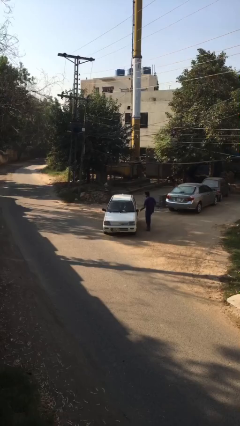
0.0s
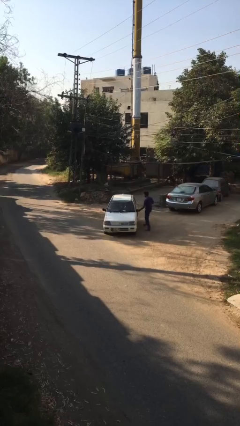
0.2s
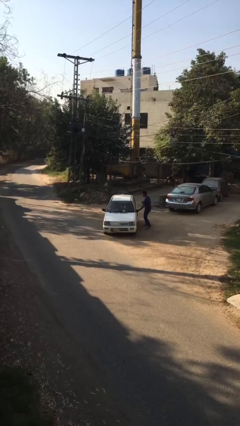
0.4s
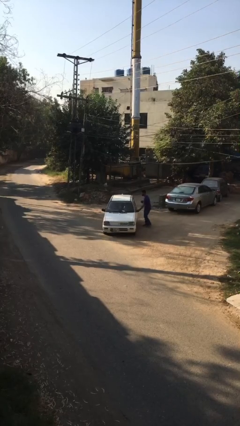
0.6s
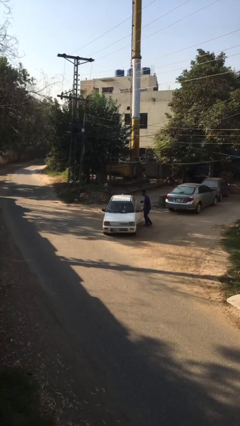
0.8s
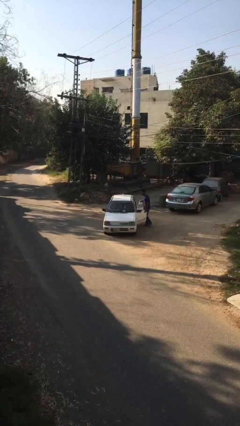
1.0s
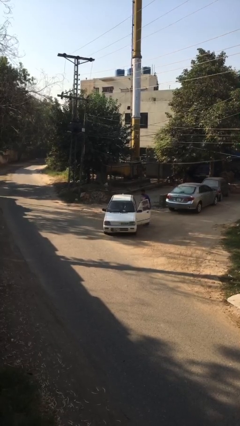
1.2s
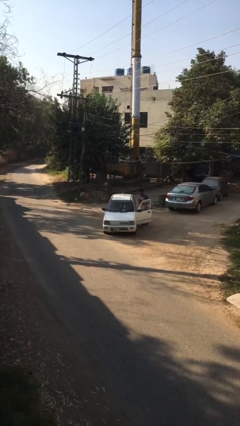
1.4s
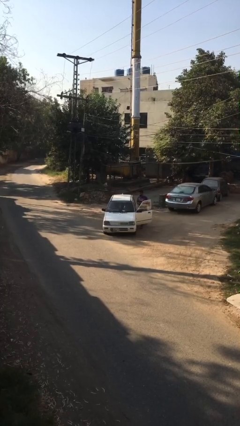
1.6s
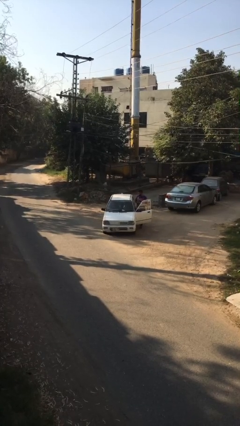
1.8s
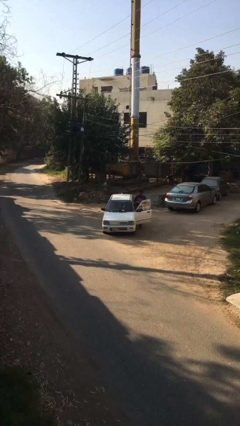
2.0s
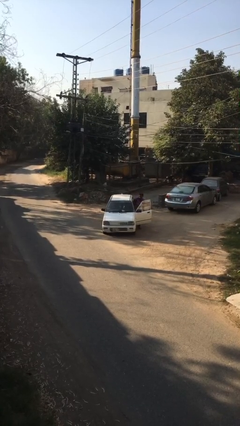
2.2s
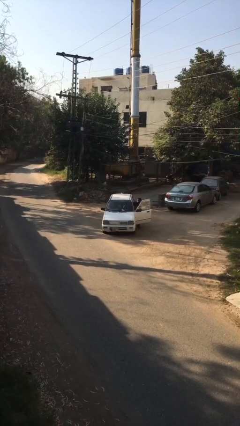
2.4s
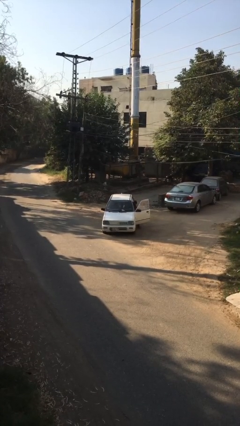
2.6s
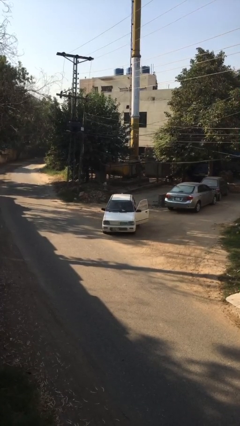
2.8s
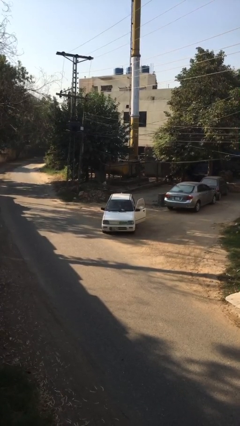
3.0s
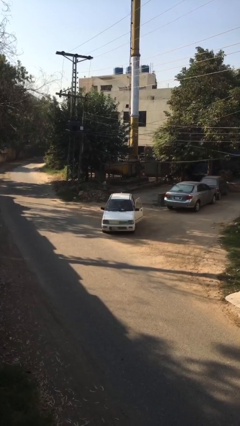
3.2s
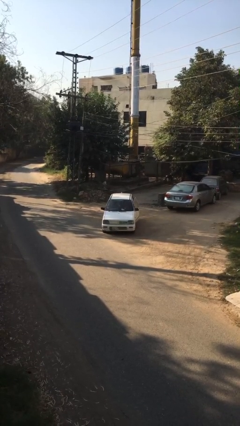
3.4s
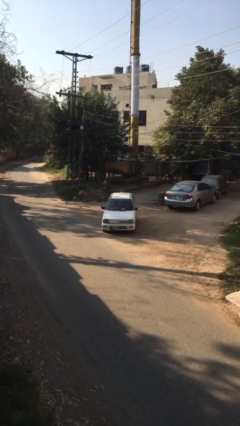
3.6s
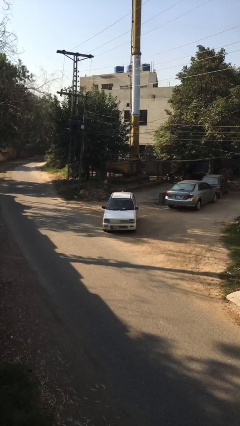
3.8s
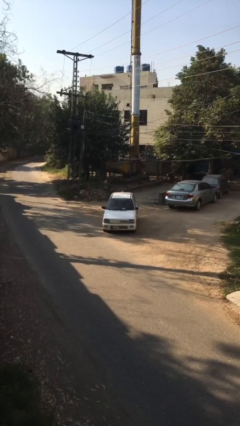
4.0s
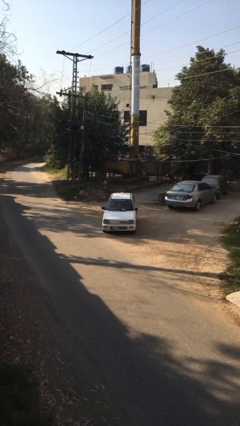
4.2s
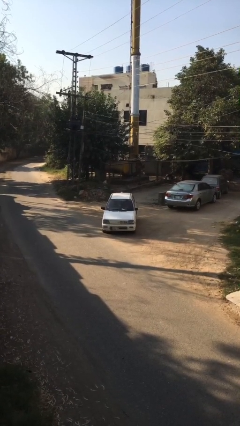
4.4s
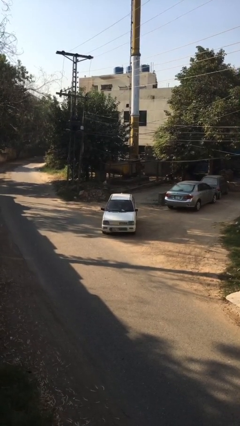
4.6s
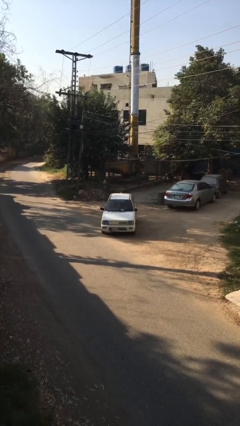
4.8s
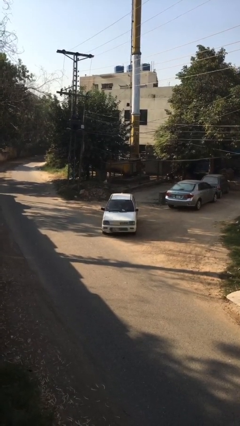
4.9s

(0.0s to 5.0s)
car picks up person

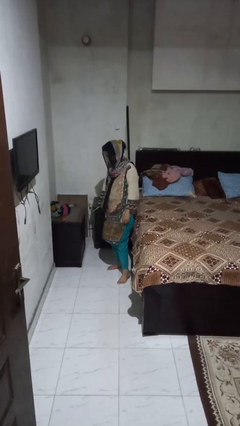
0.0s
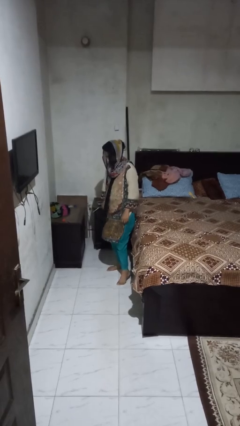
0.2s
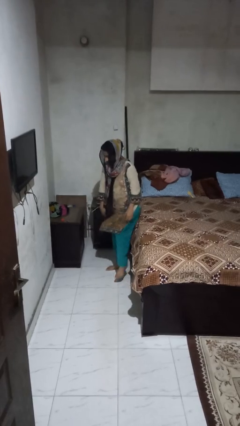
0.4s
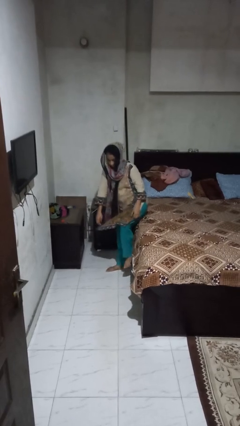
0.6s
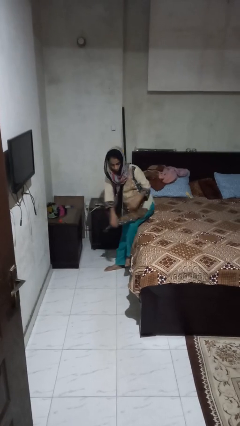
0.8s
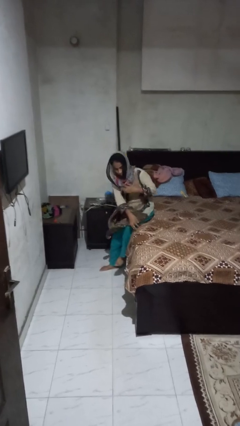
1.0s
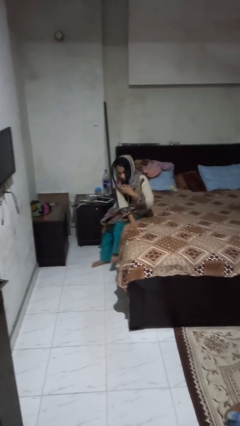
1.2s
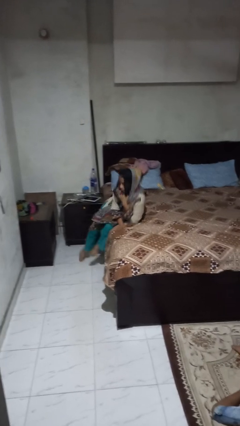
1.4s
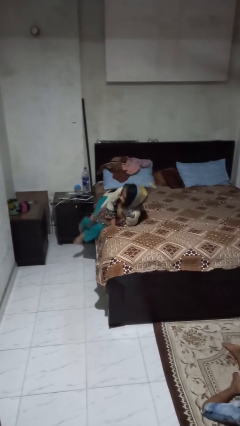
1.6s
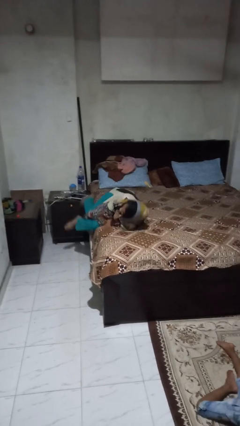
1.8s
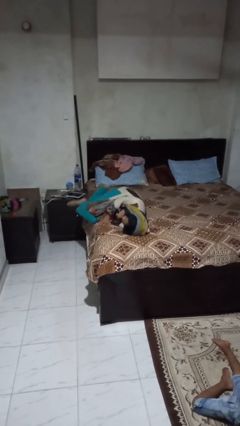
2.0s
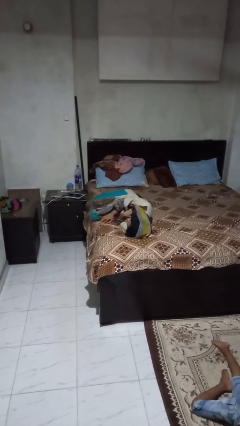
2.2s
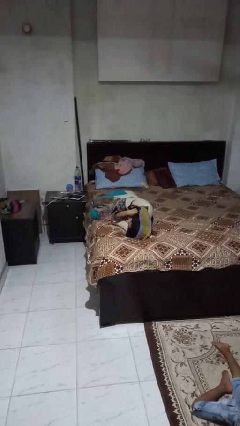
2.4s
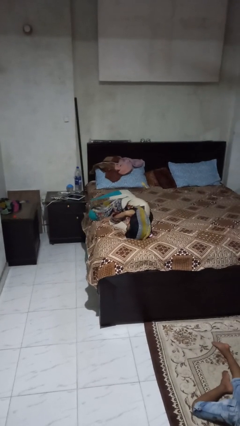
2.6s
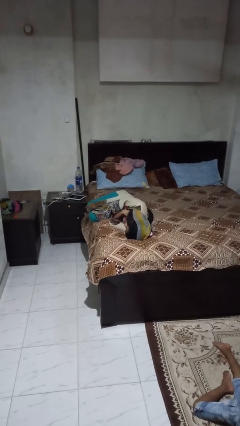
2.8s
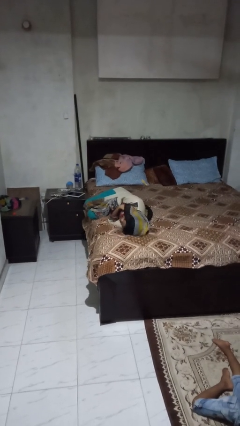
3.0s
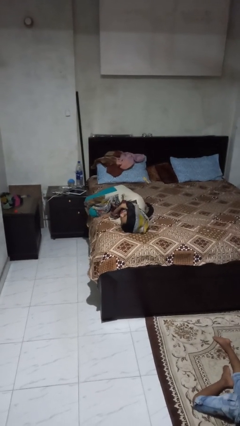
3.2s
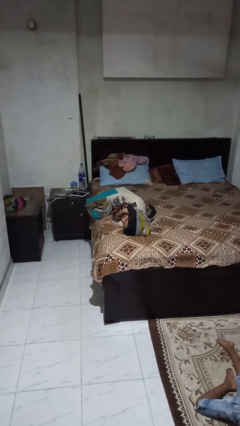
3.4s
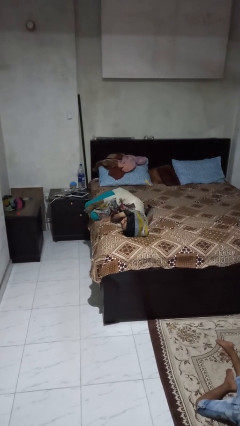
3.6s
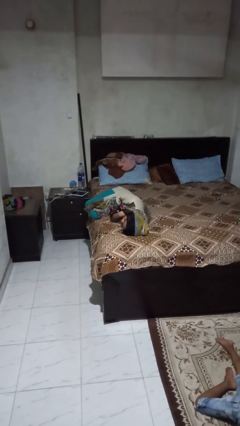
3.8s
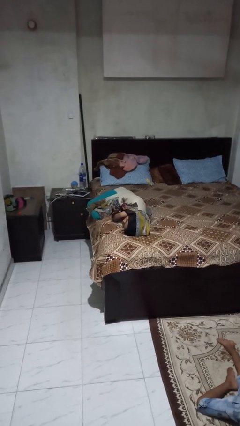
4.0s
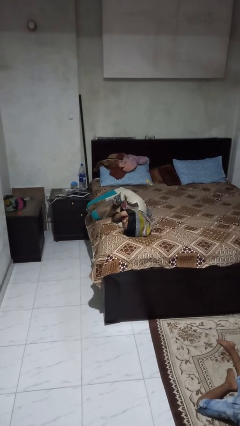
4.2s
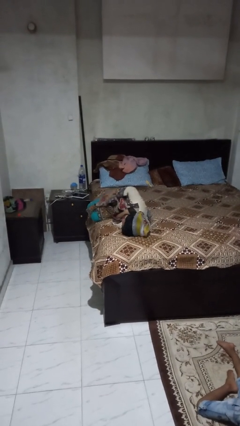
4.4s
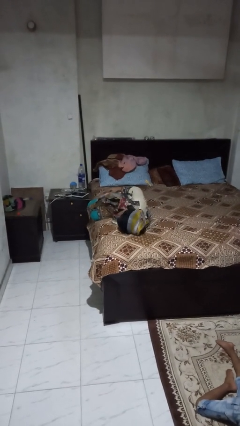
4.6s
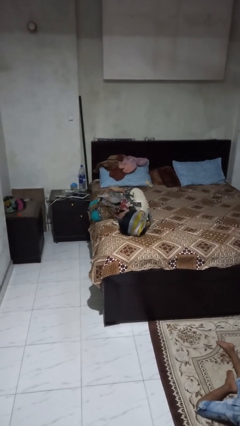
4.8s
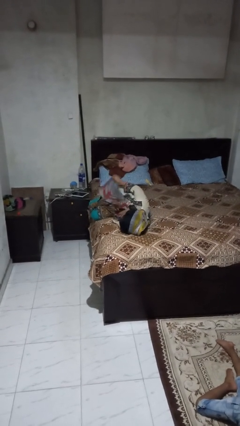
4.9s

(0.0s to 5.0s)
person lies down on bed

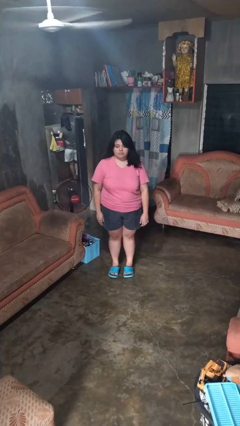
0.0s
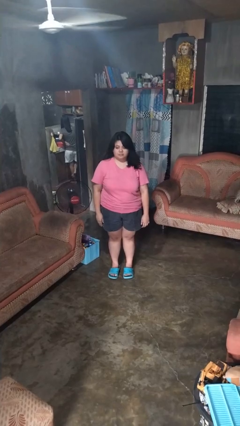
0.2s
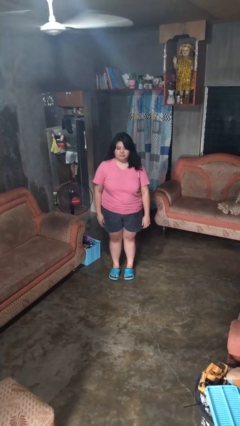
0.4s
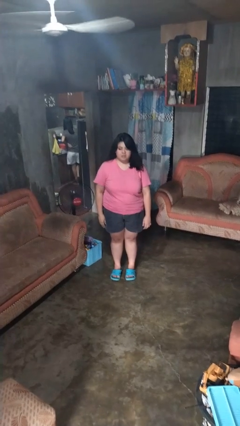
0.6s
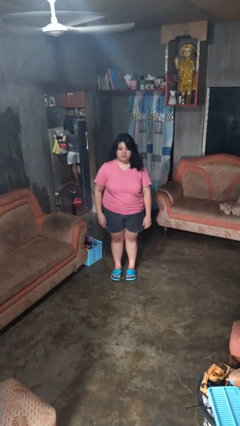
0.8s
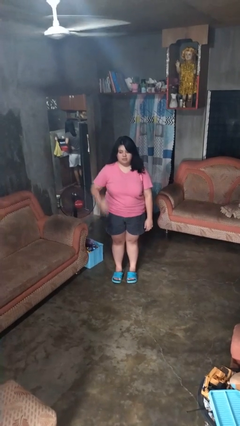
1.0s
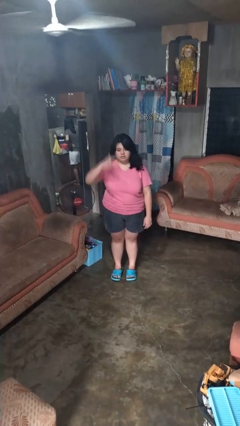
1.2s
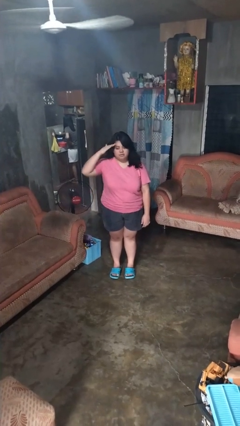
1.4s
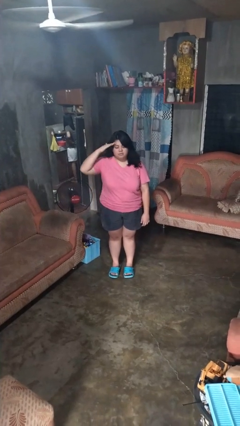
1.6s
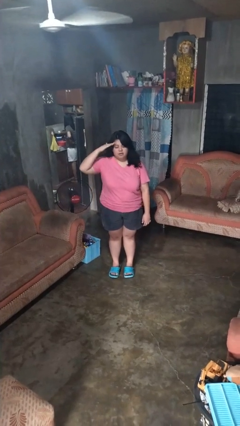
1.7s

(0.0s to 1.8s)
person salutes

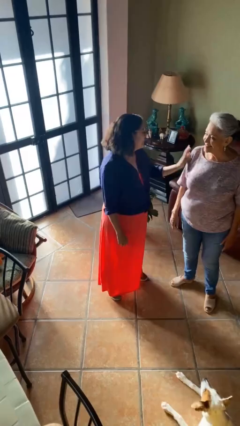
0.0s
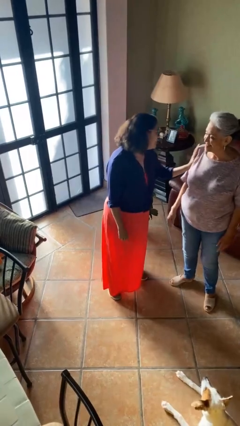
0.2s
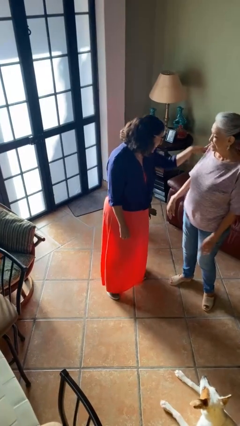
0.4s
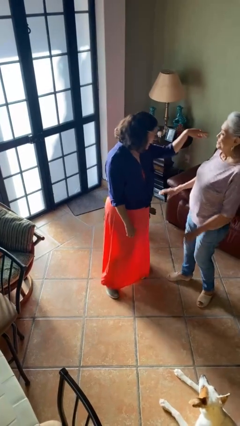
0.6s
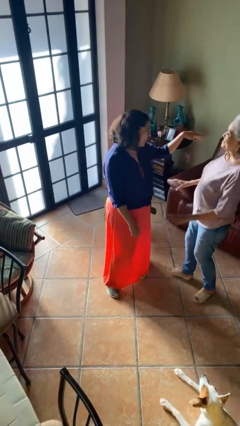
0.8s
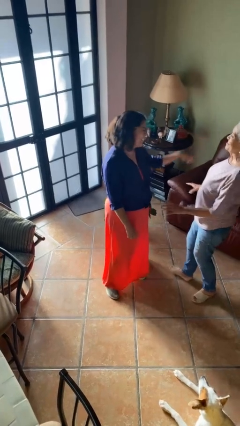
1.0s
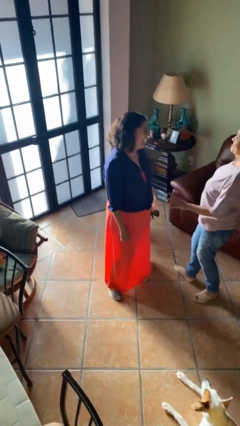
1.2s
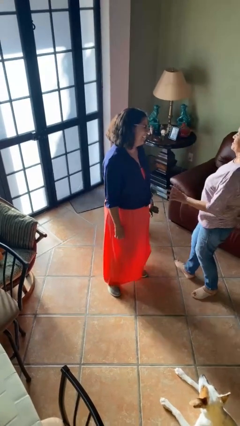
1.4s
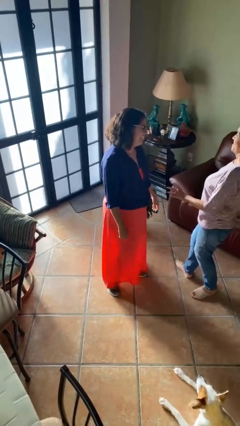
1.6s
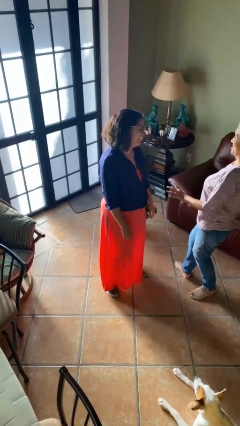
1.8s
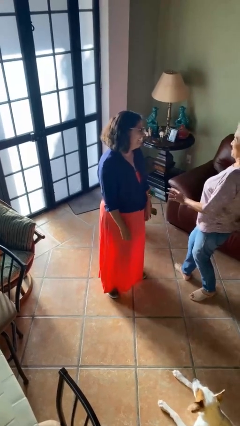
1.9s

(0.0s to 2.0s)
person shoves person

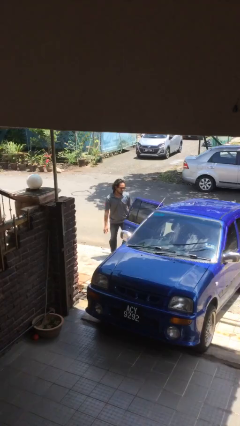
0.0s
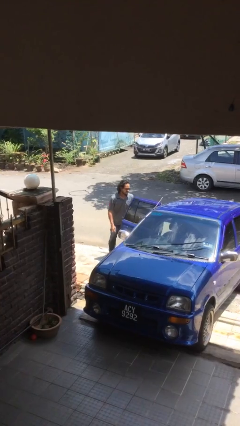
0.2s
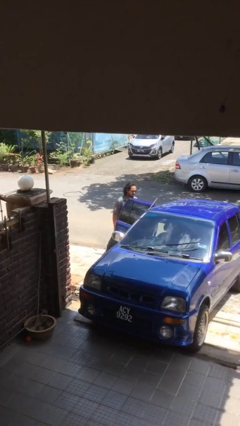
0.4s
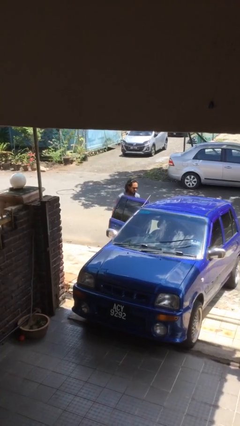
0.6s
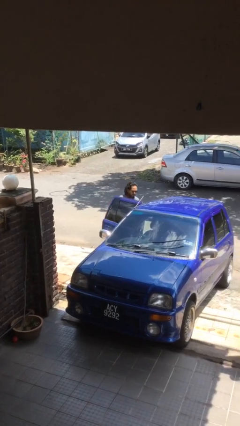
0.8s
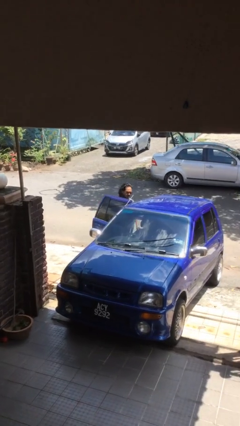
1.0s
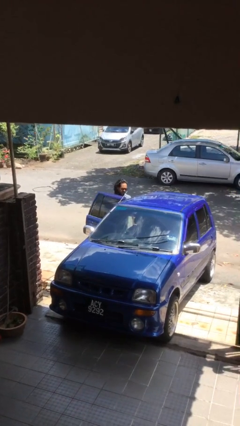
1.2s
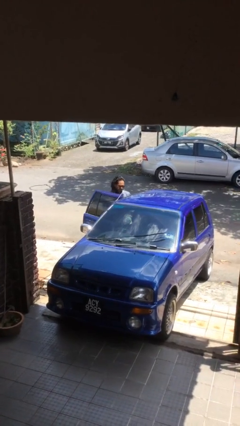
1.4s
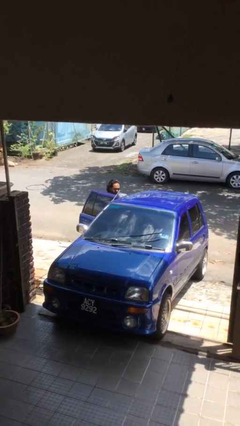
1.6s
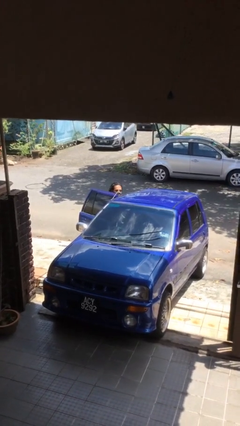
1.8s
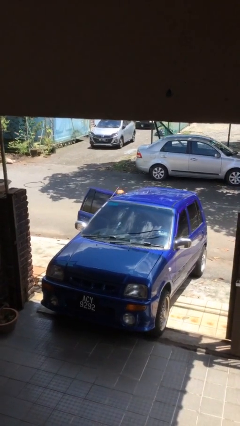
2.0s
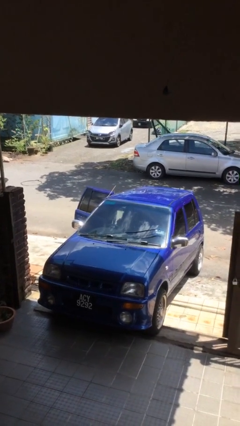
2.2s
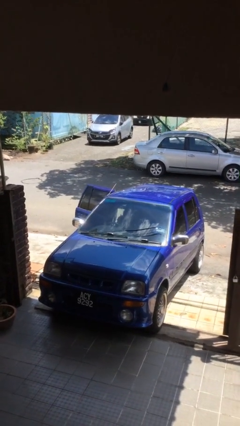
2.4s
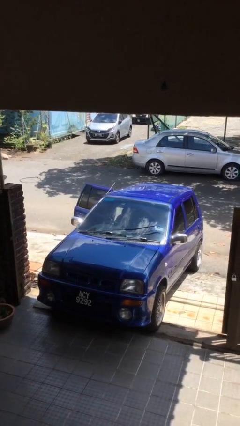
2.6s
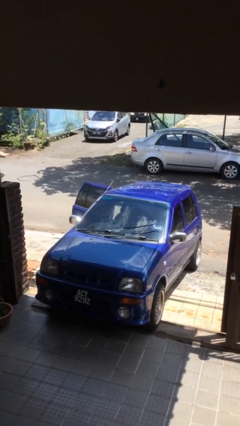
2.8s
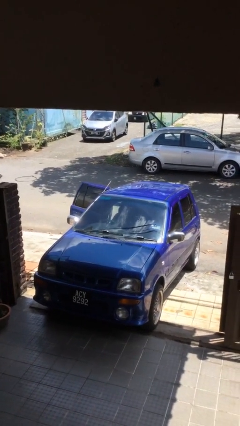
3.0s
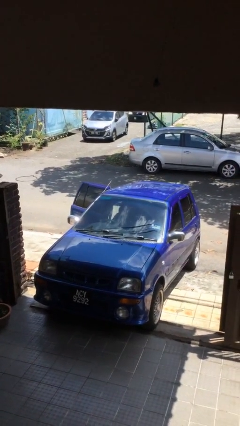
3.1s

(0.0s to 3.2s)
person enters car

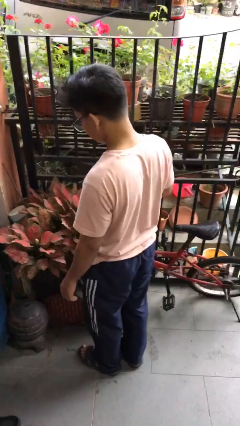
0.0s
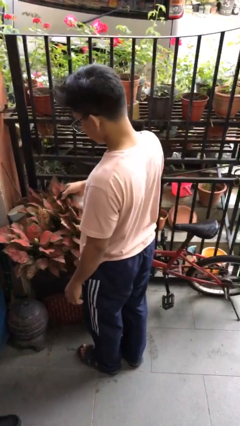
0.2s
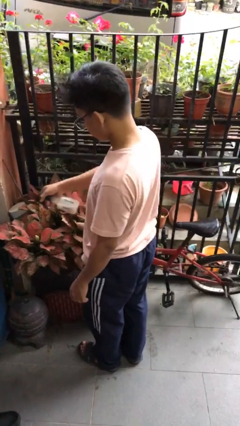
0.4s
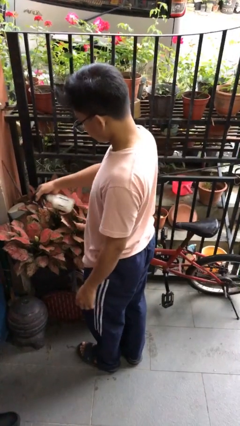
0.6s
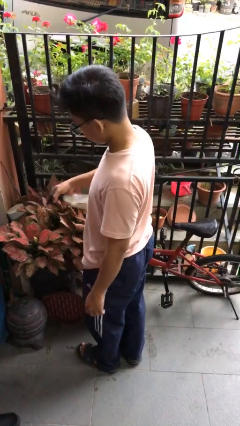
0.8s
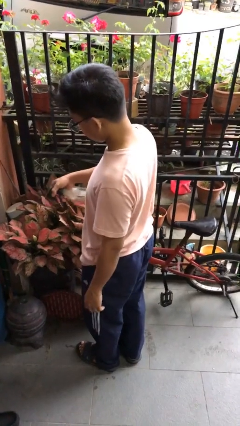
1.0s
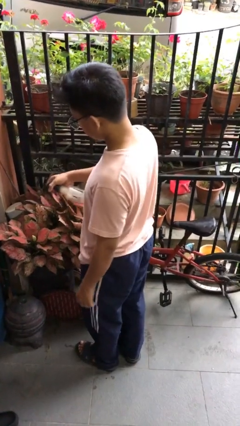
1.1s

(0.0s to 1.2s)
person waters houseplant
